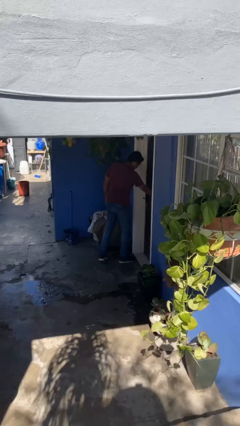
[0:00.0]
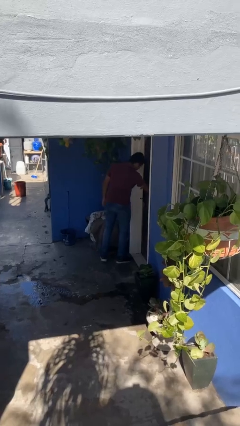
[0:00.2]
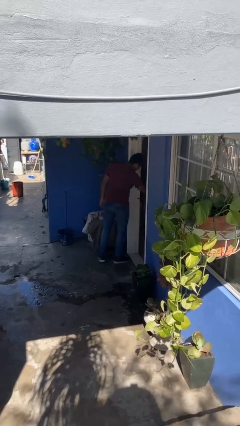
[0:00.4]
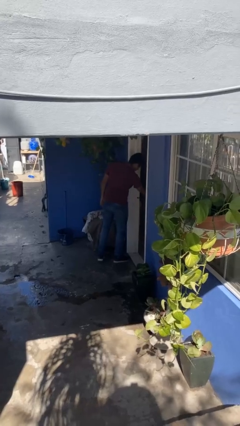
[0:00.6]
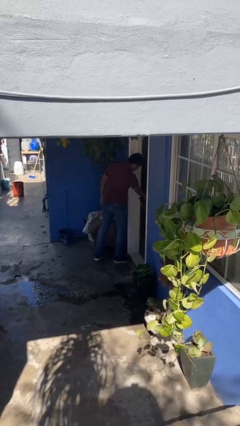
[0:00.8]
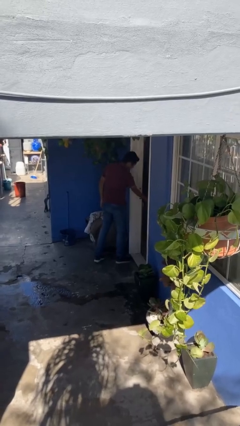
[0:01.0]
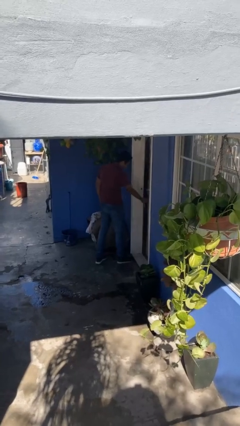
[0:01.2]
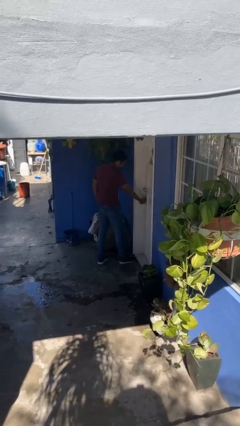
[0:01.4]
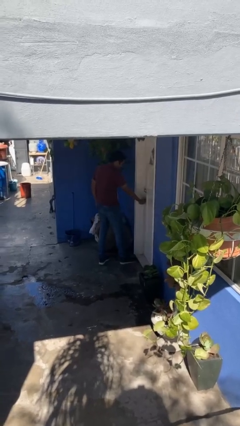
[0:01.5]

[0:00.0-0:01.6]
person closes facility door

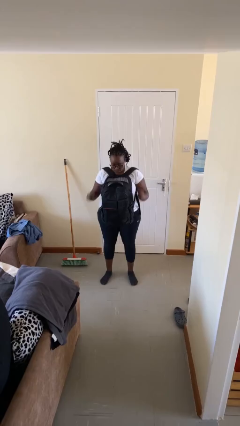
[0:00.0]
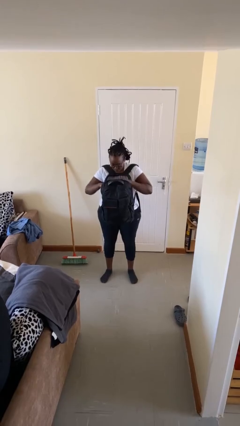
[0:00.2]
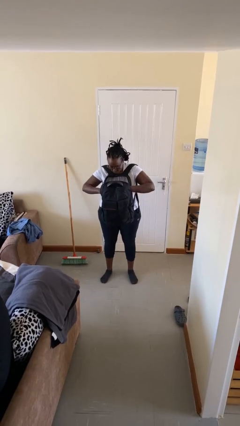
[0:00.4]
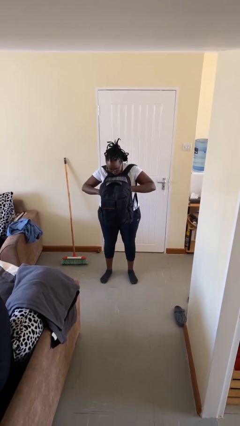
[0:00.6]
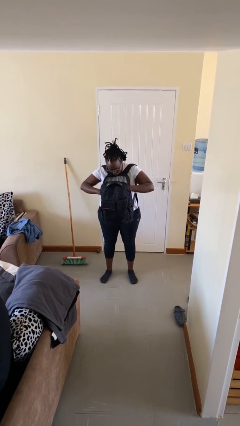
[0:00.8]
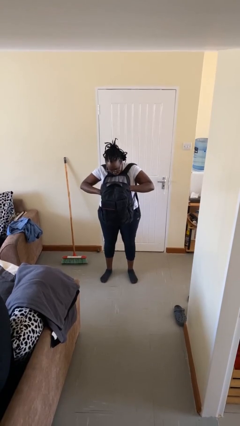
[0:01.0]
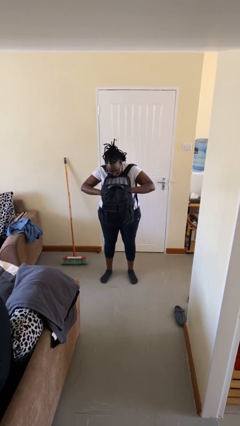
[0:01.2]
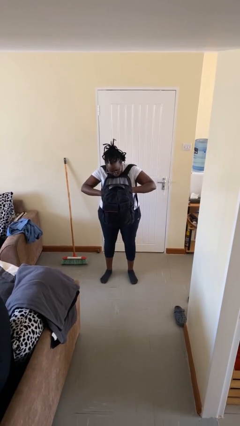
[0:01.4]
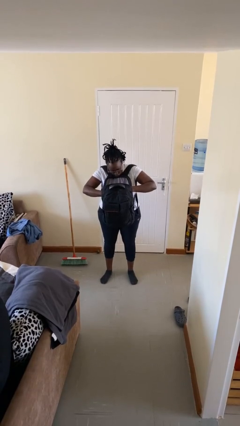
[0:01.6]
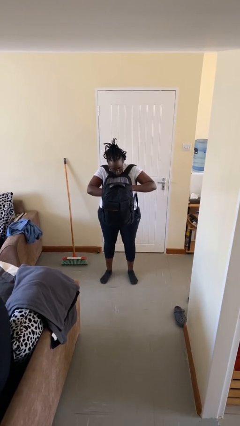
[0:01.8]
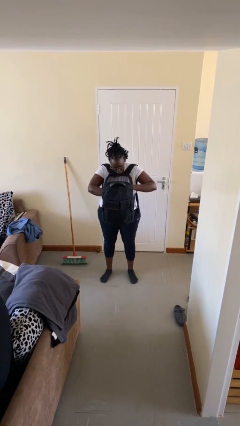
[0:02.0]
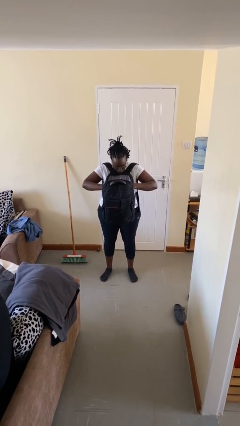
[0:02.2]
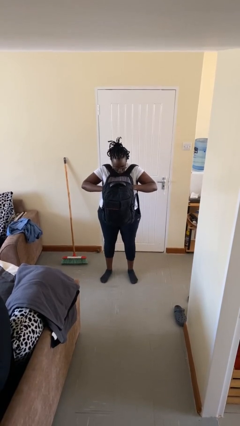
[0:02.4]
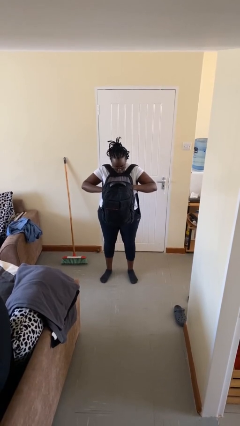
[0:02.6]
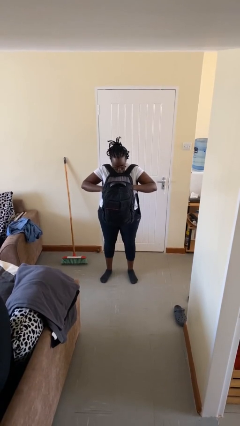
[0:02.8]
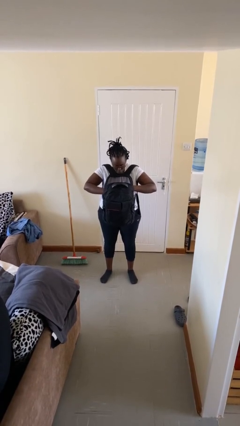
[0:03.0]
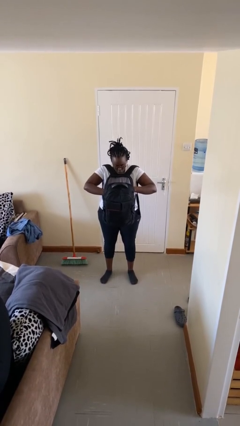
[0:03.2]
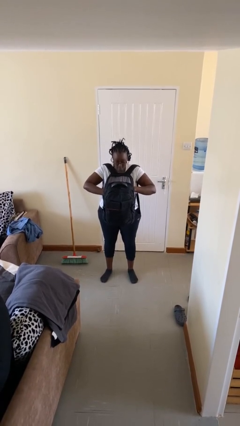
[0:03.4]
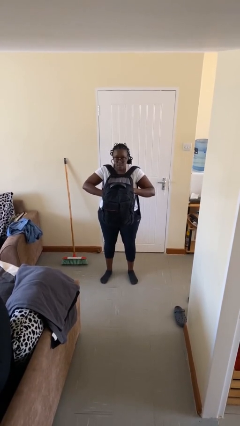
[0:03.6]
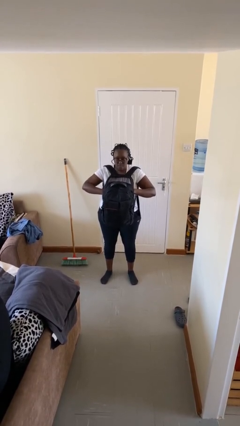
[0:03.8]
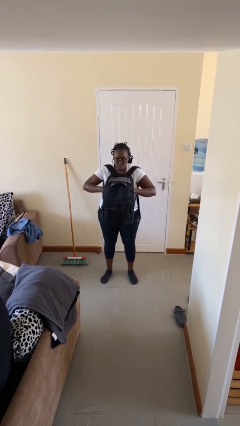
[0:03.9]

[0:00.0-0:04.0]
person searches in backpack

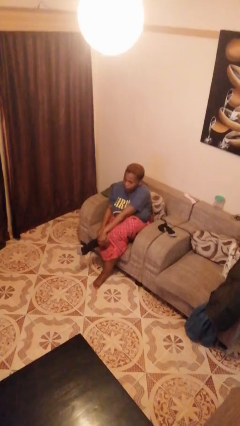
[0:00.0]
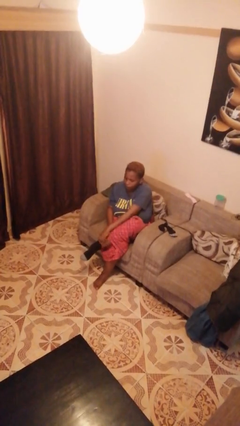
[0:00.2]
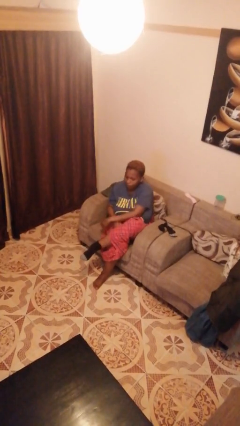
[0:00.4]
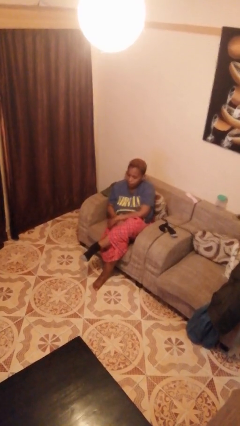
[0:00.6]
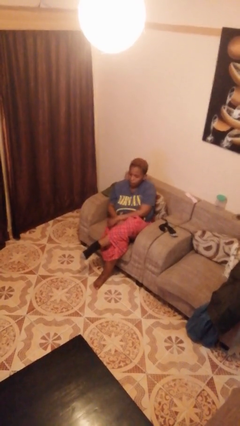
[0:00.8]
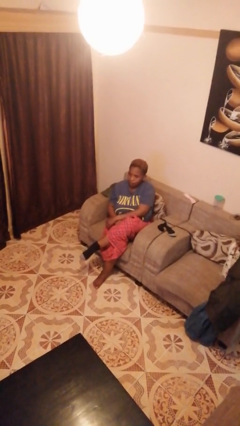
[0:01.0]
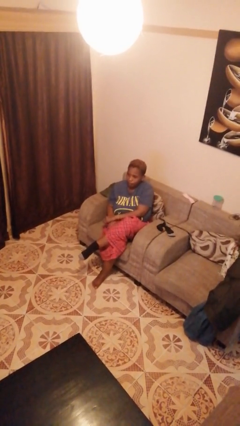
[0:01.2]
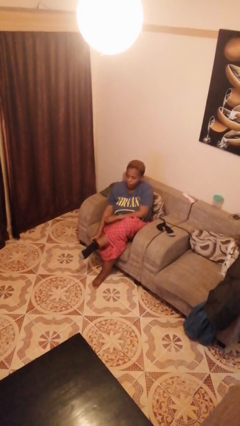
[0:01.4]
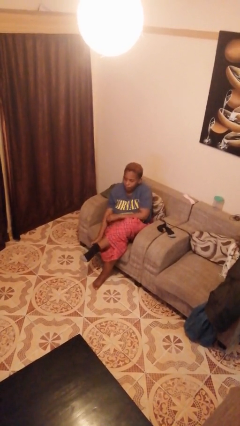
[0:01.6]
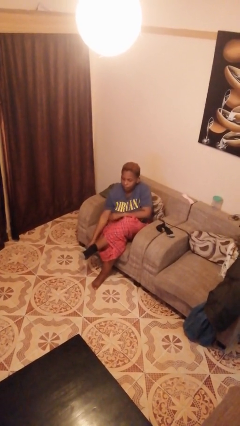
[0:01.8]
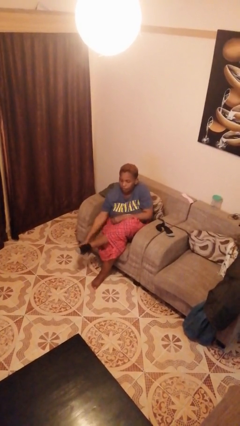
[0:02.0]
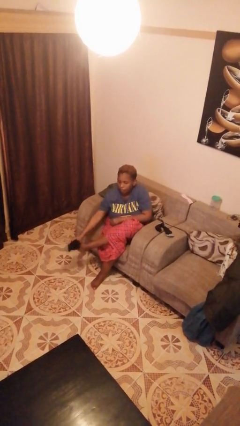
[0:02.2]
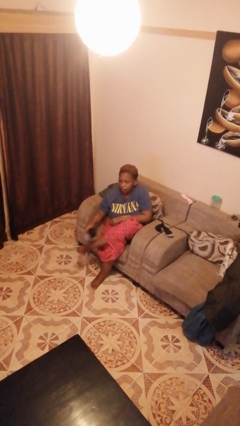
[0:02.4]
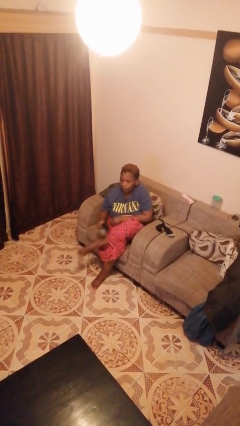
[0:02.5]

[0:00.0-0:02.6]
person takes off socks

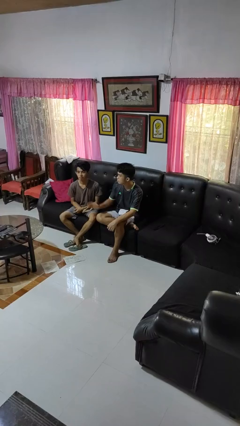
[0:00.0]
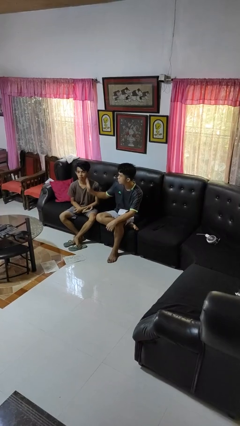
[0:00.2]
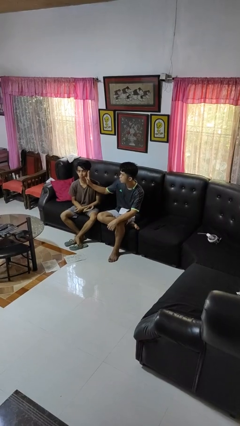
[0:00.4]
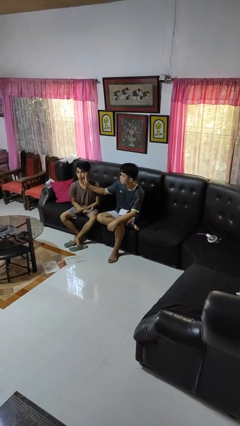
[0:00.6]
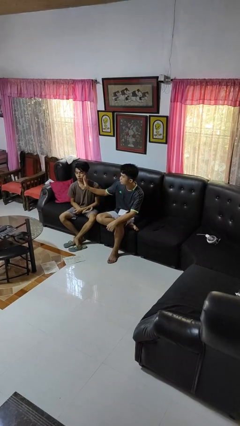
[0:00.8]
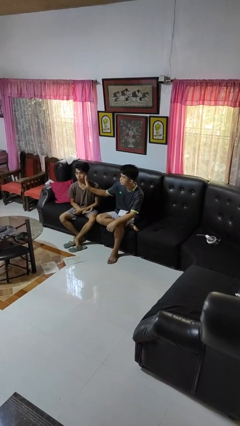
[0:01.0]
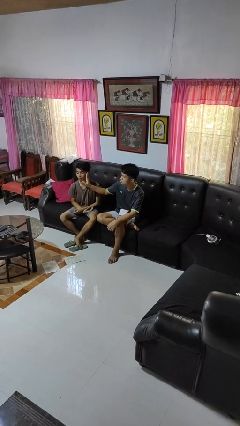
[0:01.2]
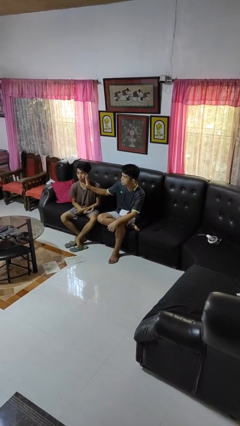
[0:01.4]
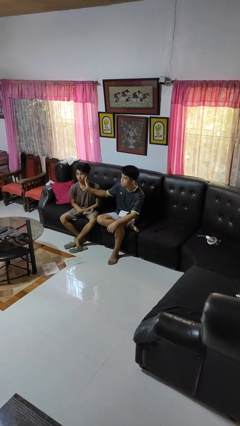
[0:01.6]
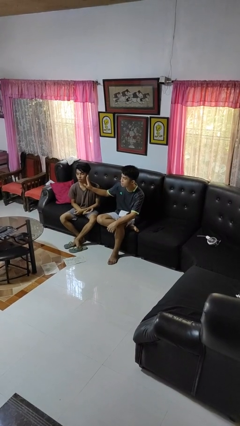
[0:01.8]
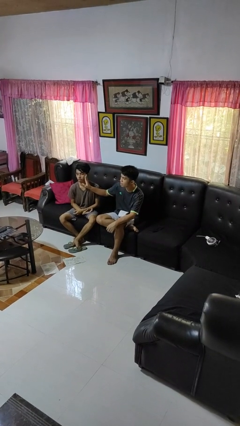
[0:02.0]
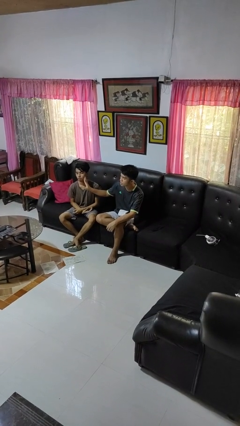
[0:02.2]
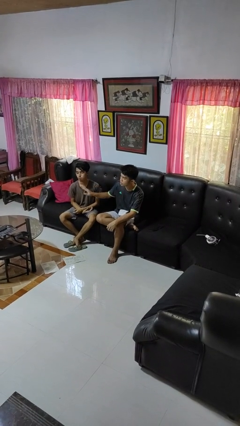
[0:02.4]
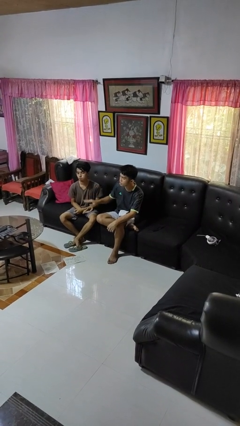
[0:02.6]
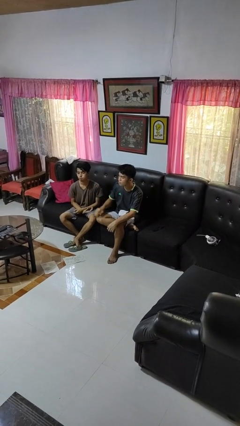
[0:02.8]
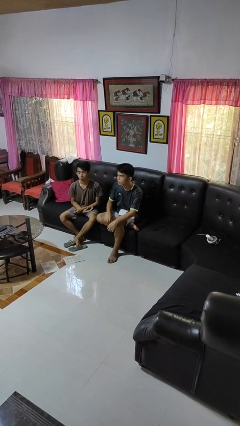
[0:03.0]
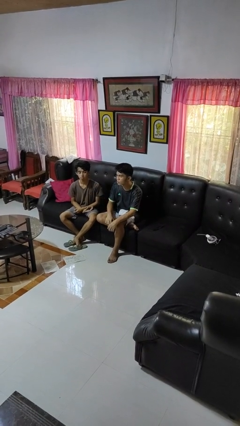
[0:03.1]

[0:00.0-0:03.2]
person touches face of person

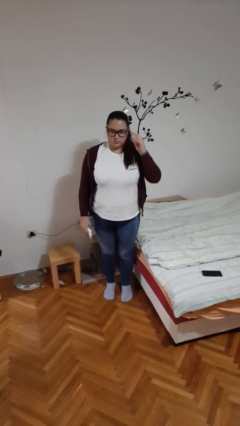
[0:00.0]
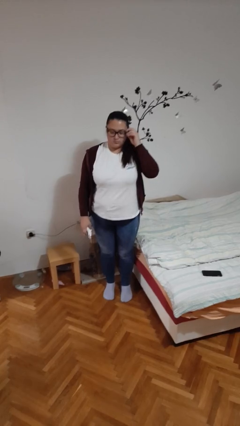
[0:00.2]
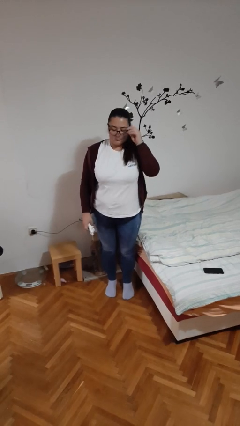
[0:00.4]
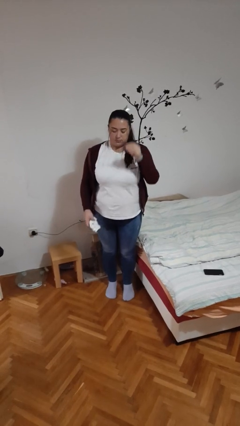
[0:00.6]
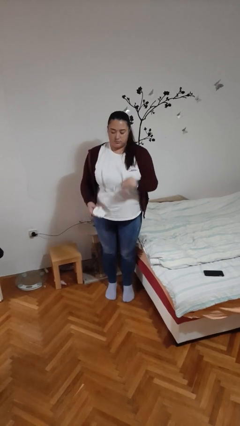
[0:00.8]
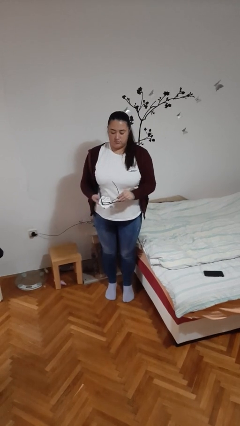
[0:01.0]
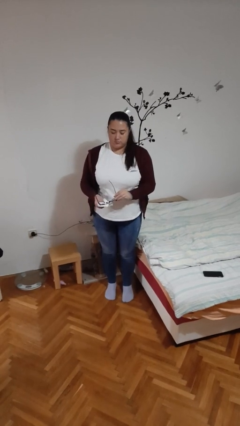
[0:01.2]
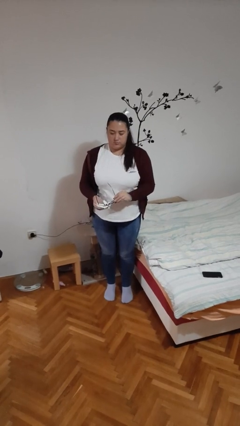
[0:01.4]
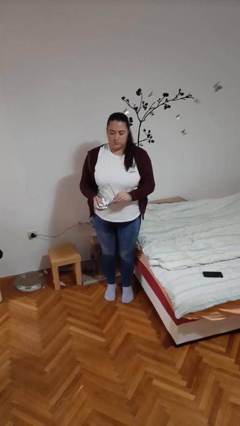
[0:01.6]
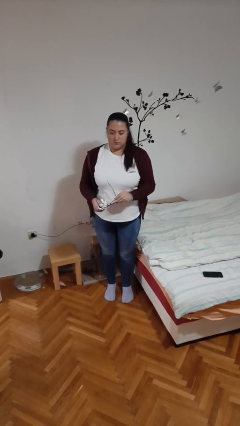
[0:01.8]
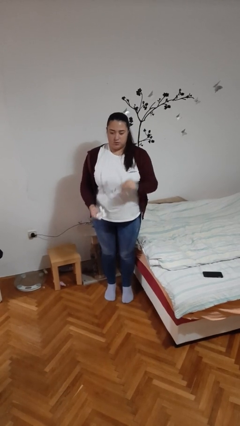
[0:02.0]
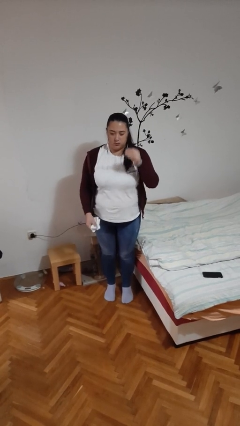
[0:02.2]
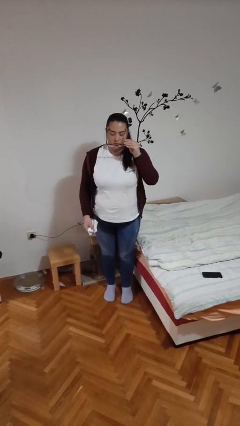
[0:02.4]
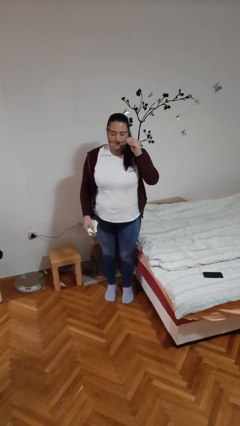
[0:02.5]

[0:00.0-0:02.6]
person cleans eyeglasses

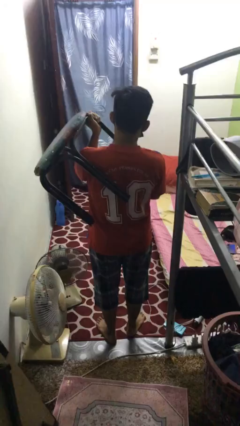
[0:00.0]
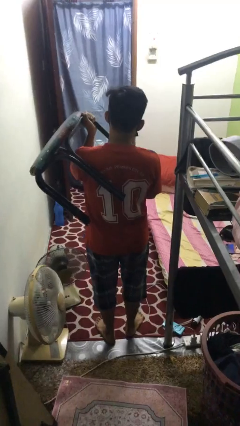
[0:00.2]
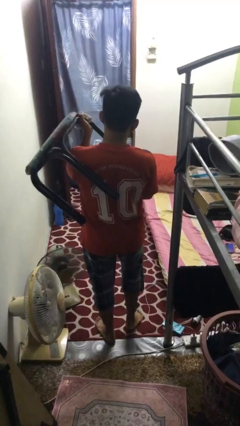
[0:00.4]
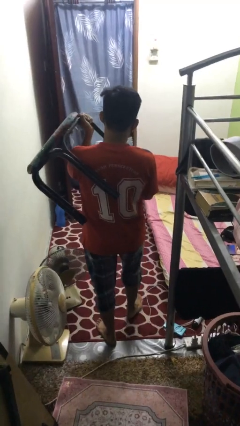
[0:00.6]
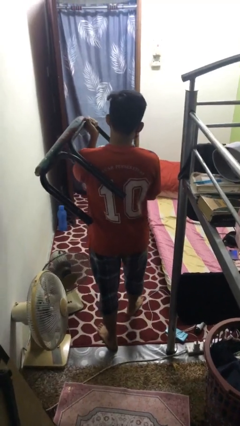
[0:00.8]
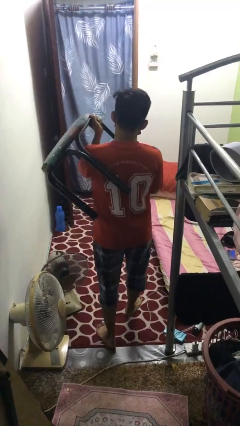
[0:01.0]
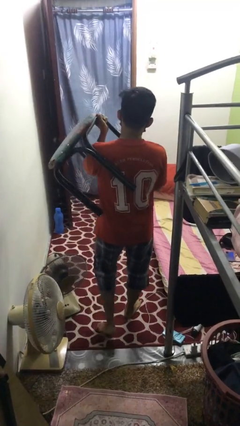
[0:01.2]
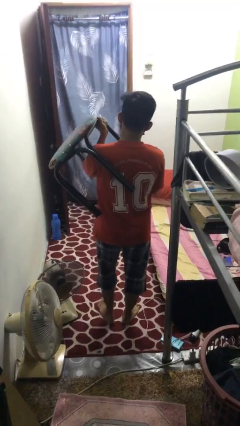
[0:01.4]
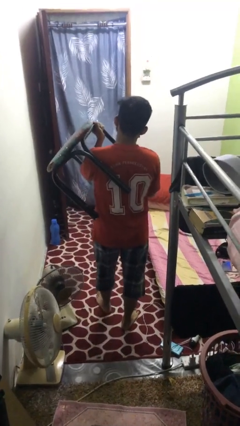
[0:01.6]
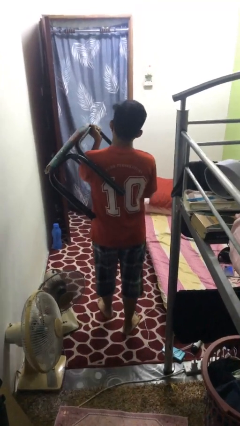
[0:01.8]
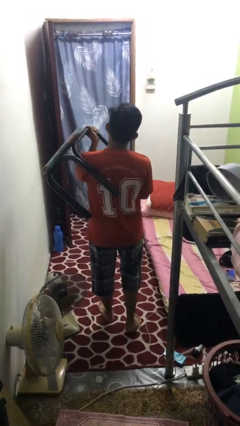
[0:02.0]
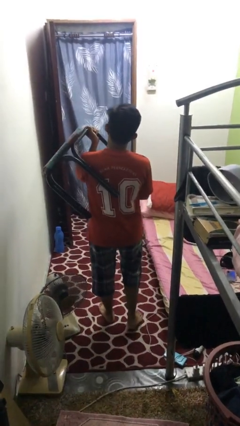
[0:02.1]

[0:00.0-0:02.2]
person carries furniture

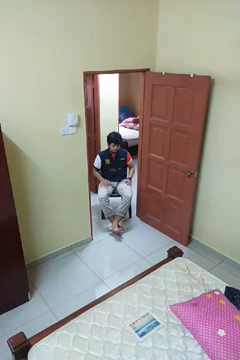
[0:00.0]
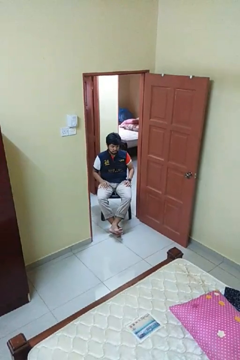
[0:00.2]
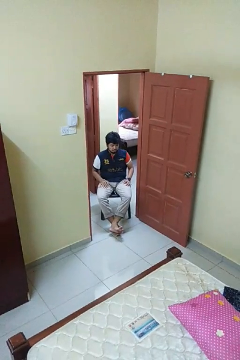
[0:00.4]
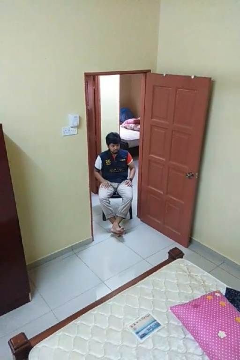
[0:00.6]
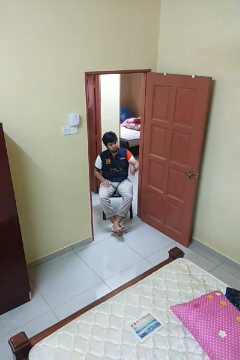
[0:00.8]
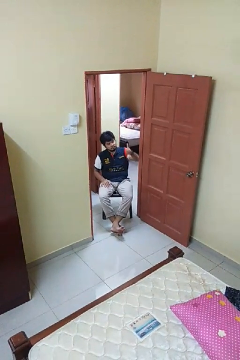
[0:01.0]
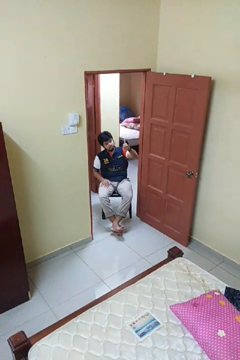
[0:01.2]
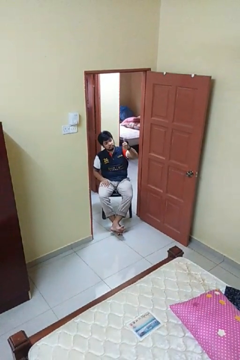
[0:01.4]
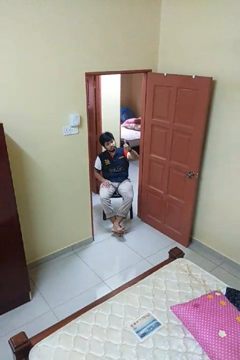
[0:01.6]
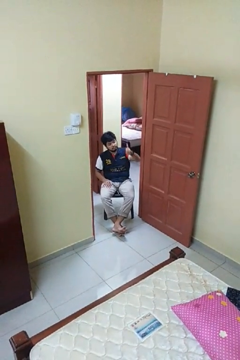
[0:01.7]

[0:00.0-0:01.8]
person gestures thumbs up
